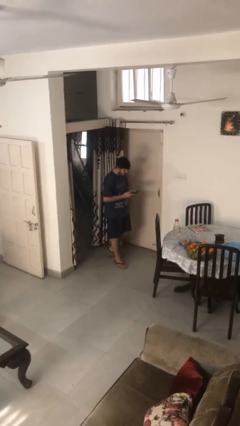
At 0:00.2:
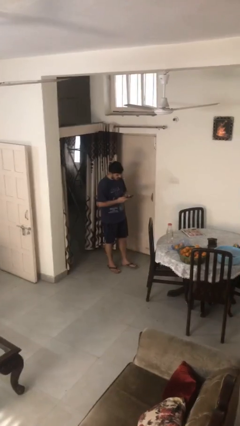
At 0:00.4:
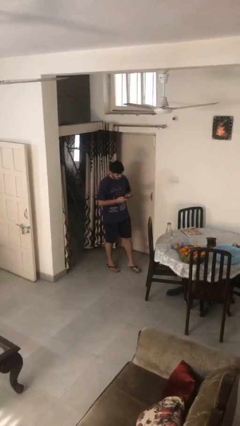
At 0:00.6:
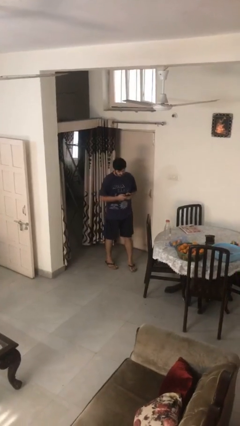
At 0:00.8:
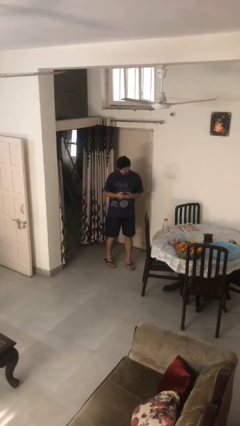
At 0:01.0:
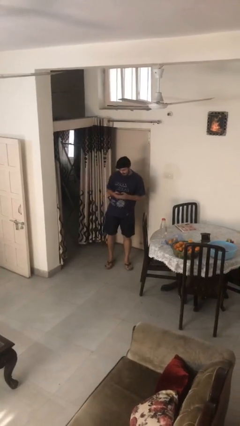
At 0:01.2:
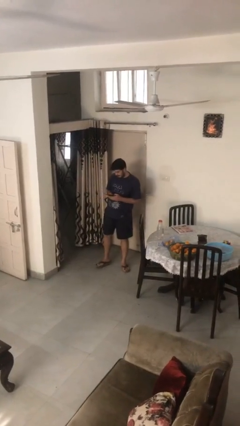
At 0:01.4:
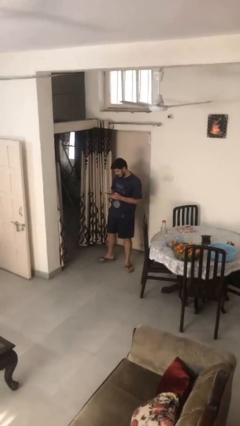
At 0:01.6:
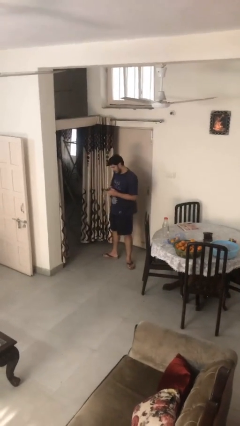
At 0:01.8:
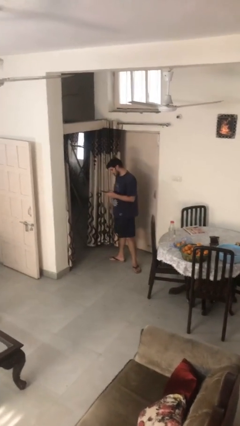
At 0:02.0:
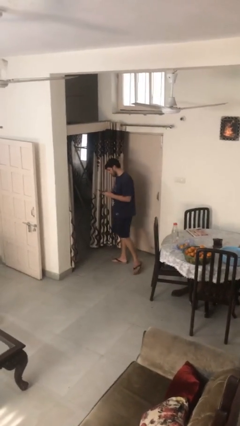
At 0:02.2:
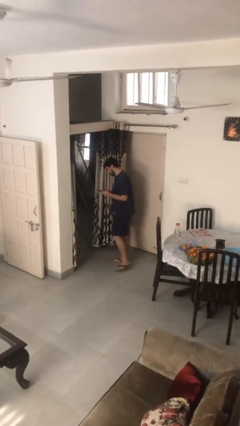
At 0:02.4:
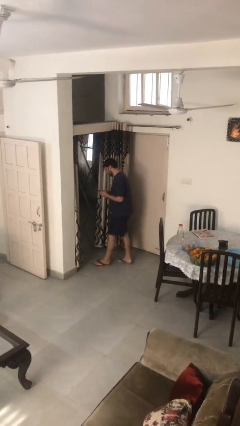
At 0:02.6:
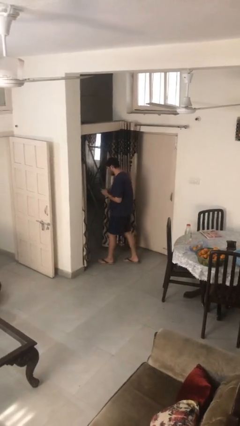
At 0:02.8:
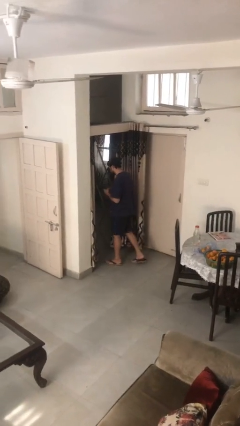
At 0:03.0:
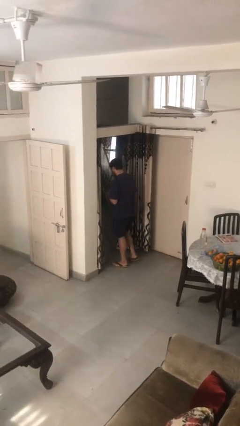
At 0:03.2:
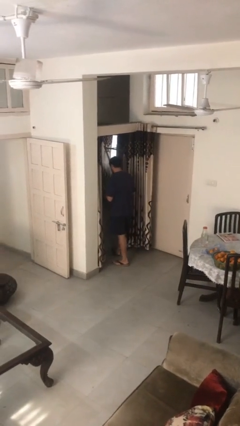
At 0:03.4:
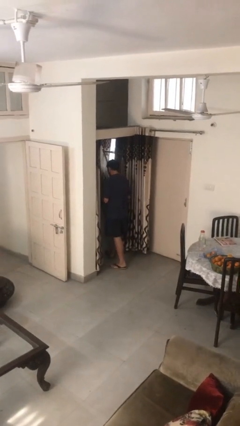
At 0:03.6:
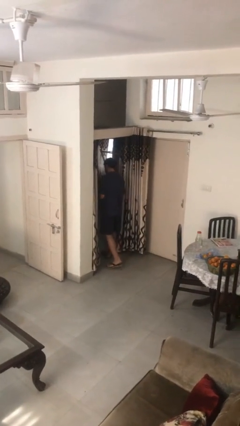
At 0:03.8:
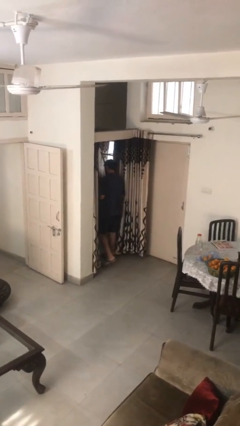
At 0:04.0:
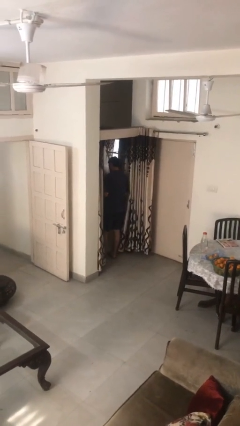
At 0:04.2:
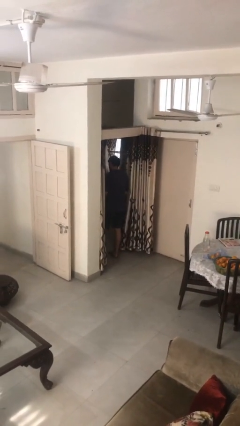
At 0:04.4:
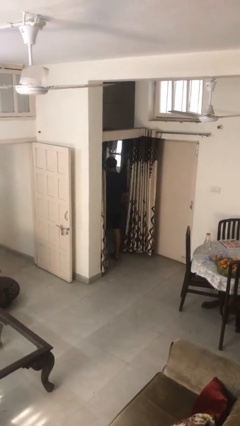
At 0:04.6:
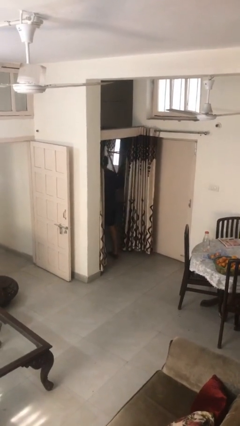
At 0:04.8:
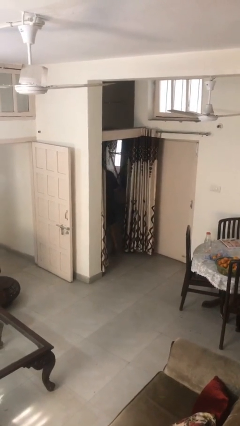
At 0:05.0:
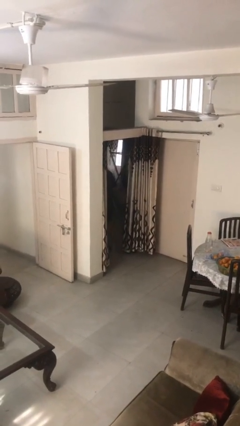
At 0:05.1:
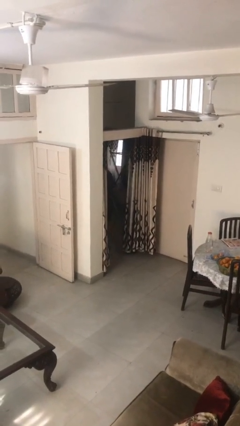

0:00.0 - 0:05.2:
person exits scene through structure

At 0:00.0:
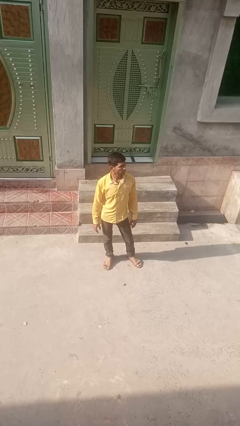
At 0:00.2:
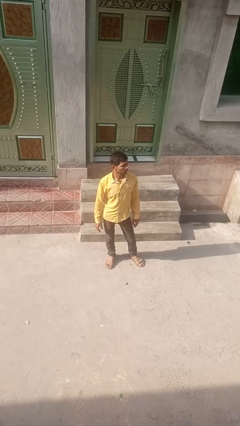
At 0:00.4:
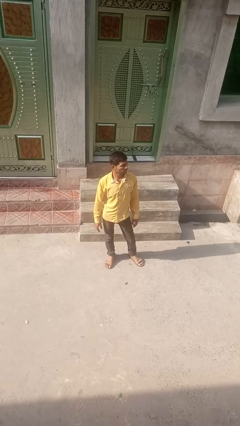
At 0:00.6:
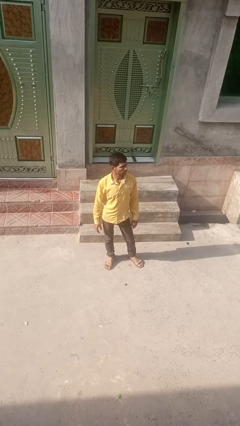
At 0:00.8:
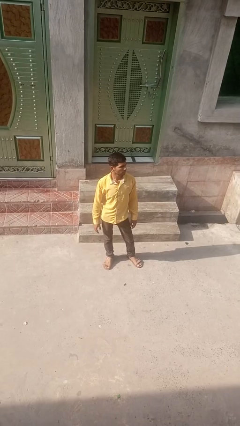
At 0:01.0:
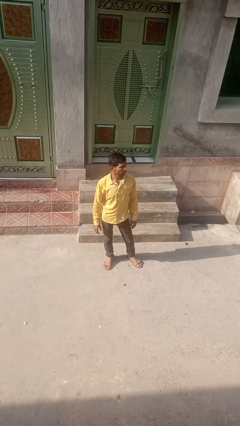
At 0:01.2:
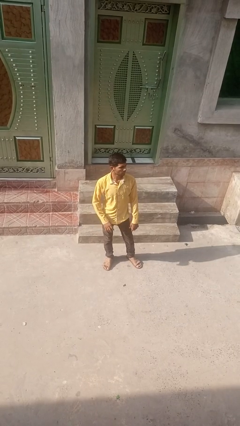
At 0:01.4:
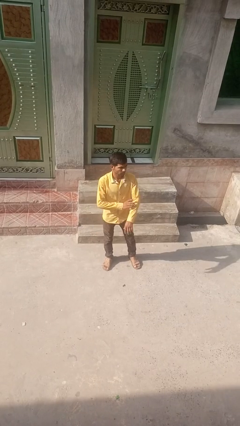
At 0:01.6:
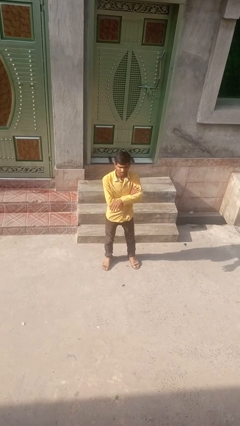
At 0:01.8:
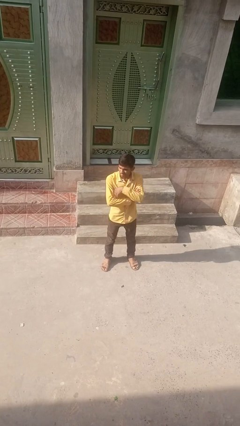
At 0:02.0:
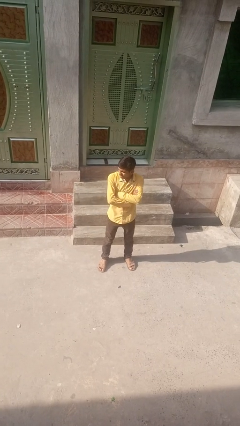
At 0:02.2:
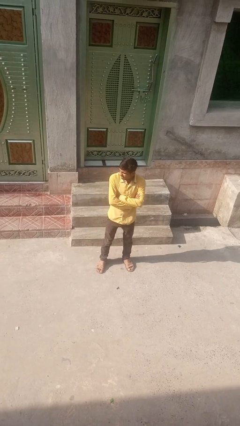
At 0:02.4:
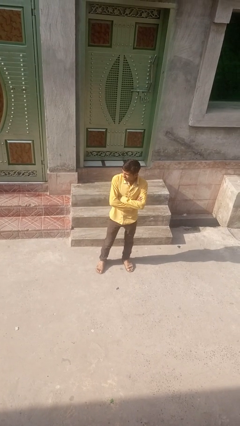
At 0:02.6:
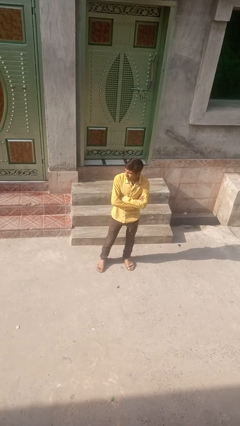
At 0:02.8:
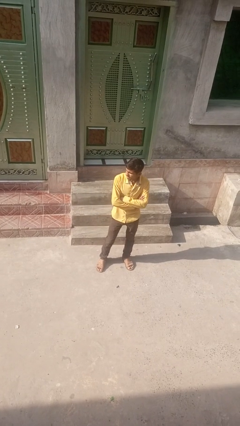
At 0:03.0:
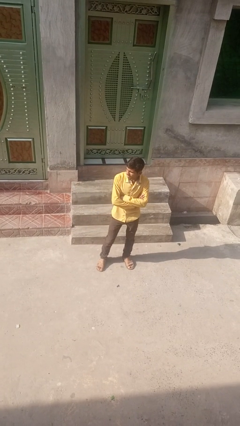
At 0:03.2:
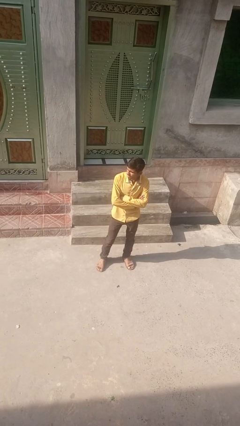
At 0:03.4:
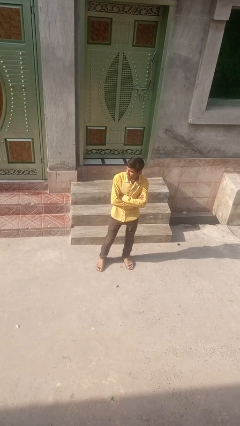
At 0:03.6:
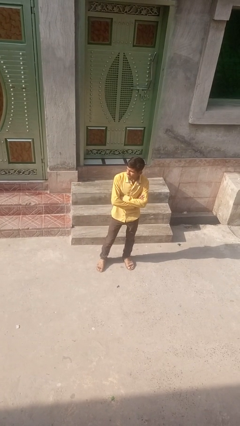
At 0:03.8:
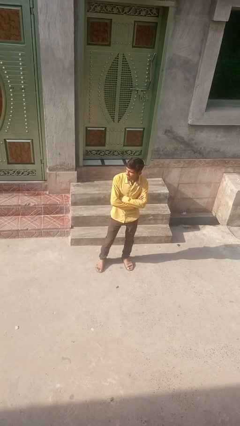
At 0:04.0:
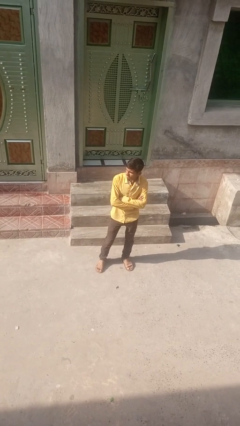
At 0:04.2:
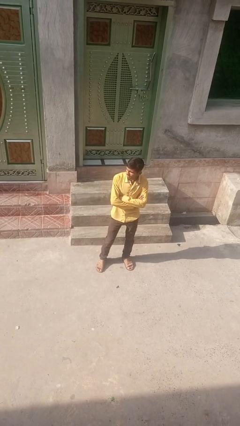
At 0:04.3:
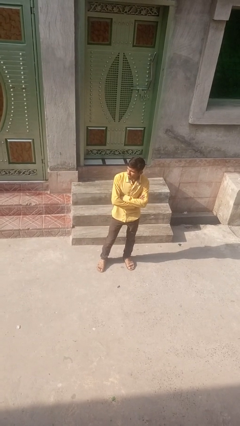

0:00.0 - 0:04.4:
person crosses arms

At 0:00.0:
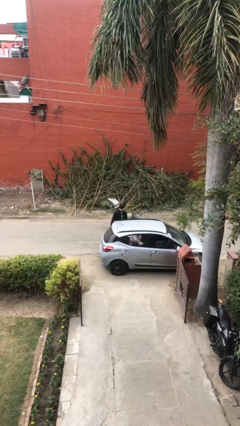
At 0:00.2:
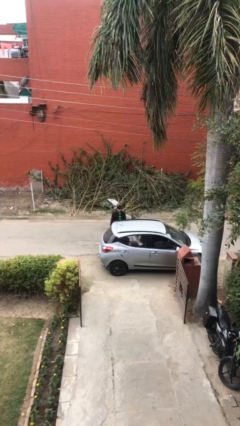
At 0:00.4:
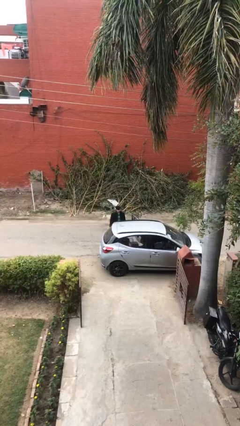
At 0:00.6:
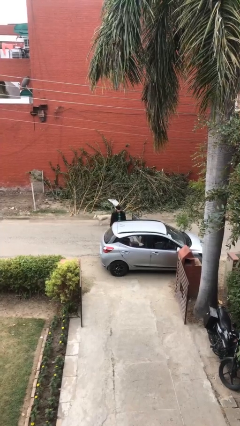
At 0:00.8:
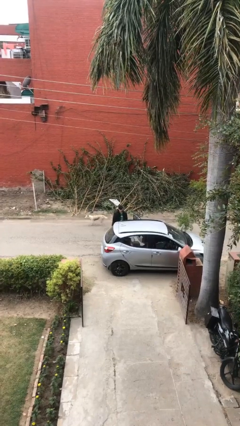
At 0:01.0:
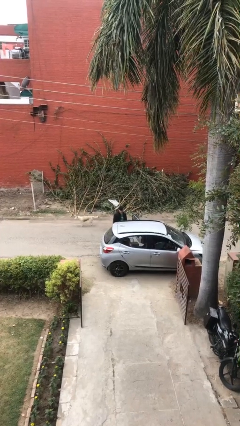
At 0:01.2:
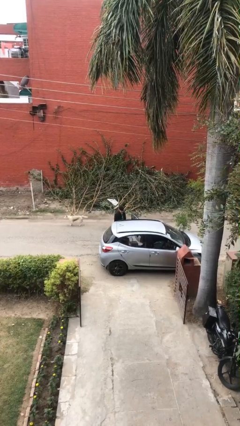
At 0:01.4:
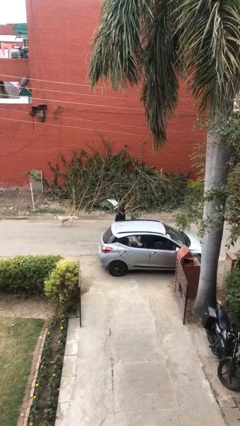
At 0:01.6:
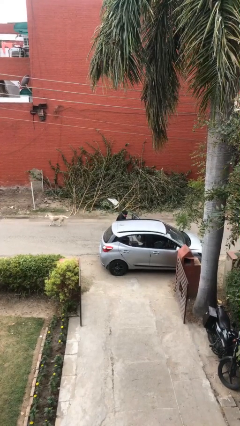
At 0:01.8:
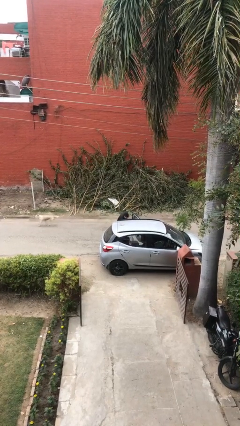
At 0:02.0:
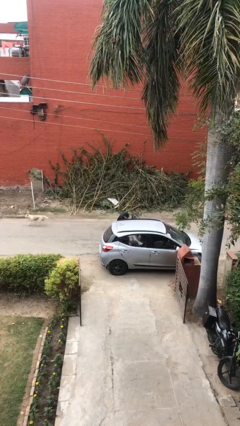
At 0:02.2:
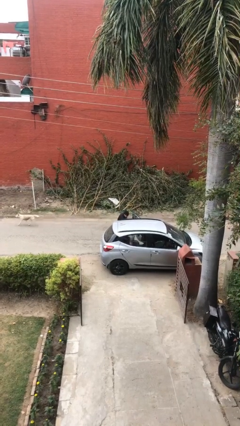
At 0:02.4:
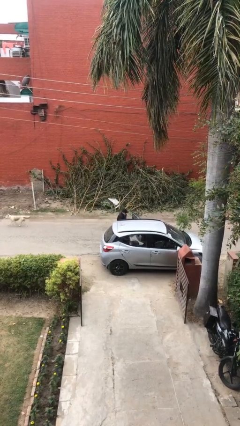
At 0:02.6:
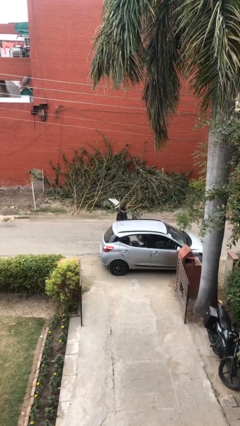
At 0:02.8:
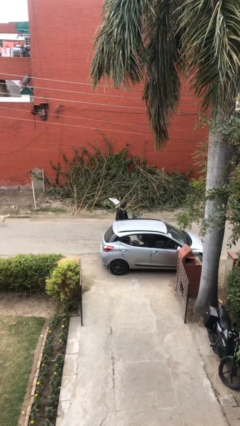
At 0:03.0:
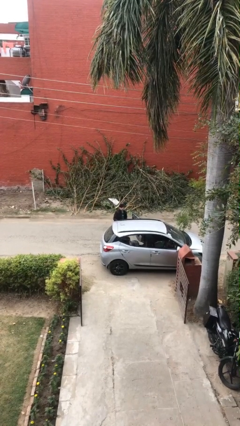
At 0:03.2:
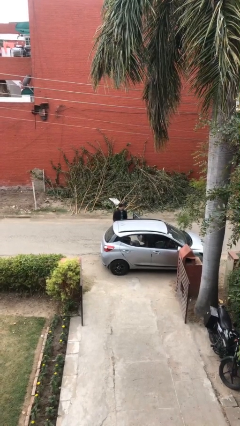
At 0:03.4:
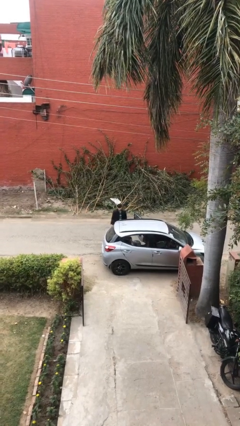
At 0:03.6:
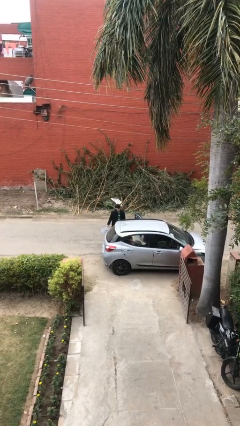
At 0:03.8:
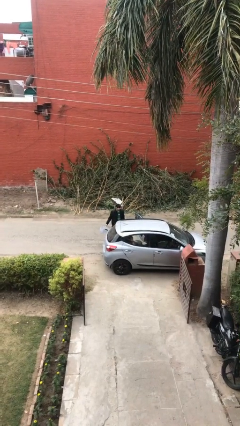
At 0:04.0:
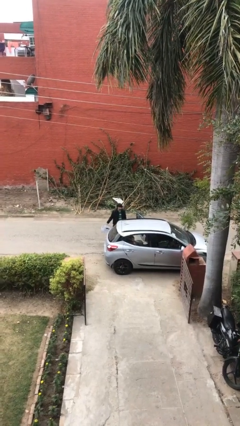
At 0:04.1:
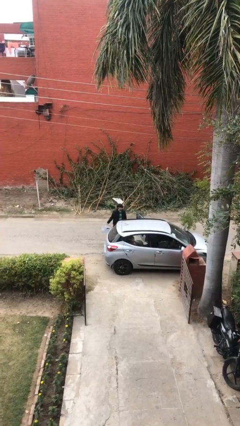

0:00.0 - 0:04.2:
person unloads car

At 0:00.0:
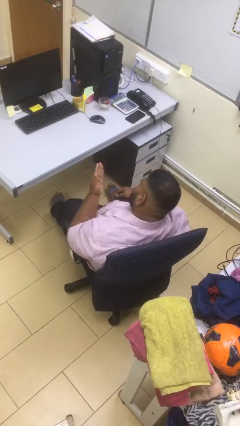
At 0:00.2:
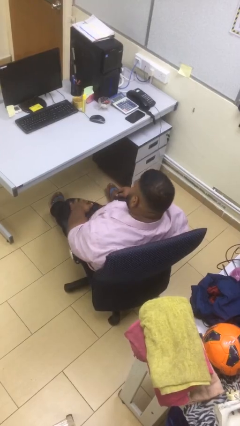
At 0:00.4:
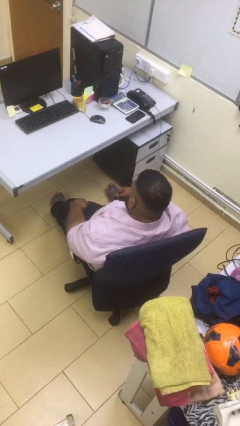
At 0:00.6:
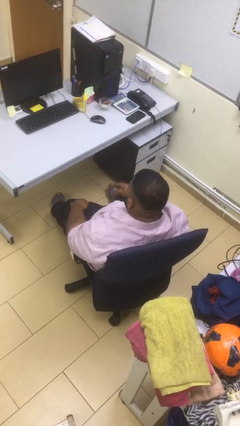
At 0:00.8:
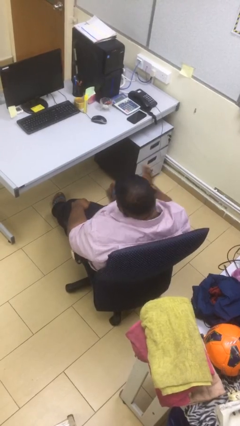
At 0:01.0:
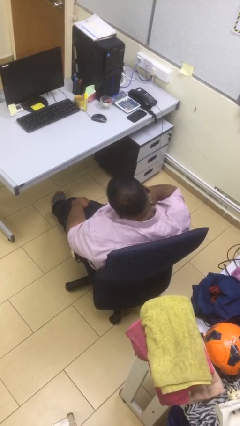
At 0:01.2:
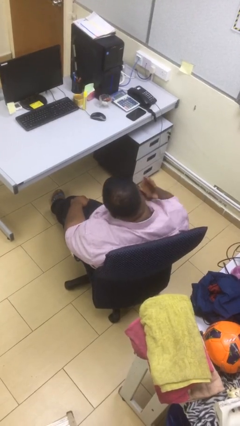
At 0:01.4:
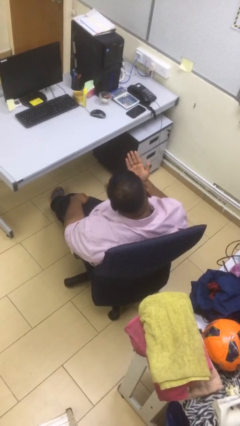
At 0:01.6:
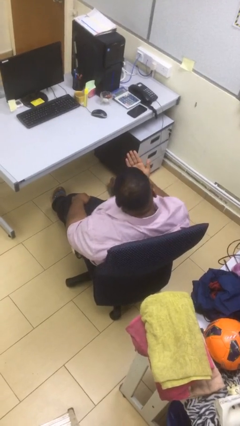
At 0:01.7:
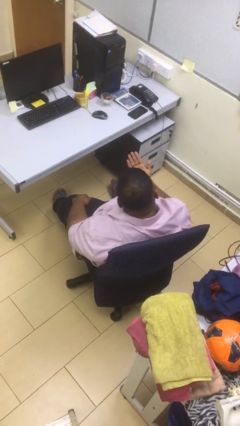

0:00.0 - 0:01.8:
person swats bug

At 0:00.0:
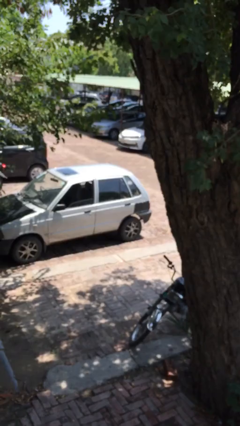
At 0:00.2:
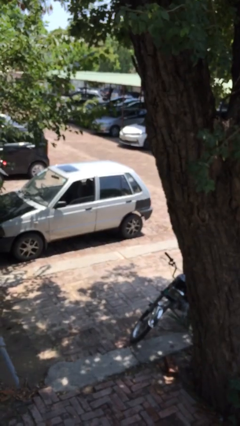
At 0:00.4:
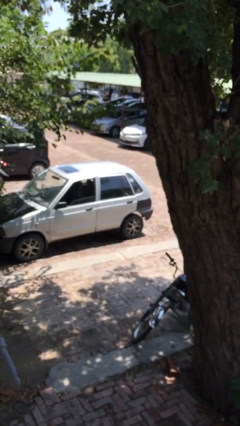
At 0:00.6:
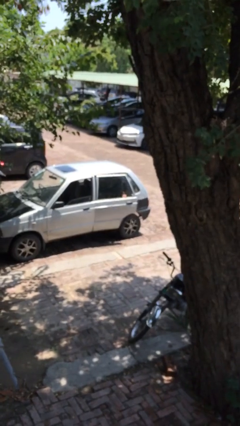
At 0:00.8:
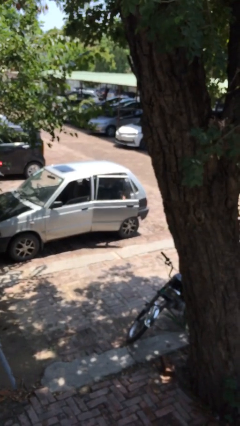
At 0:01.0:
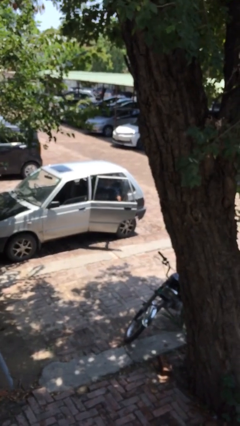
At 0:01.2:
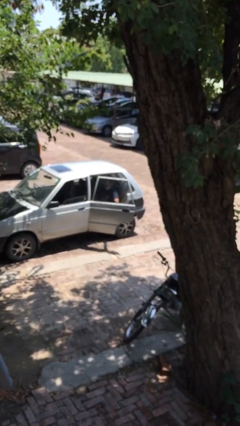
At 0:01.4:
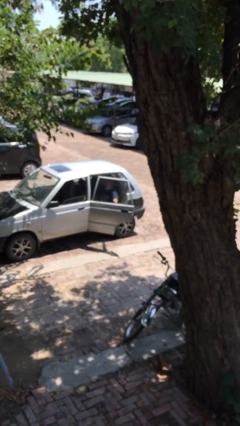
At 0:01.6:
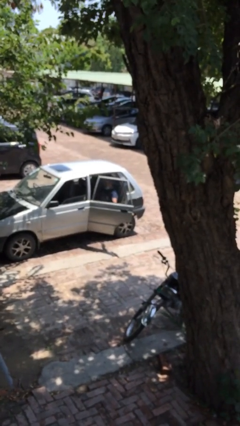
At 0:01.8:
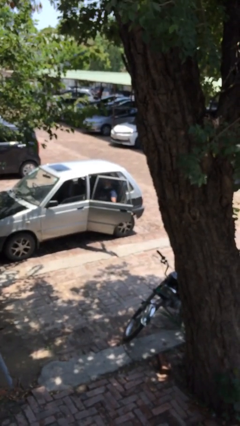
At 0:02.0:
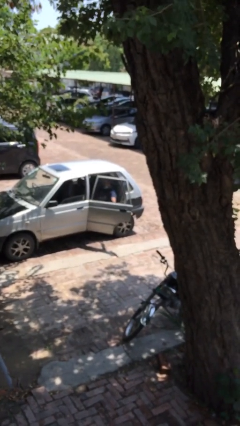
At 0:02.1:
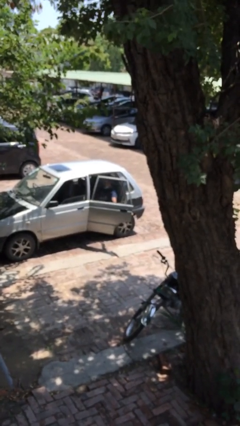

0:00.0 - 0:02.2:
person opens car door
